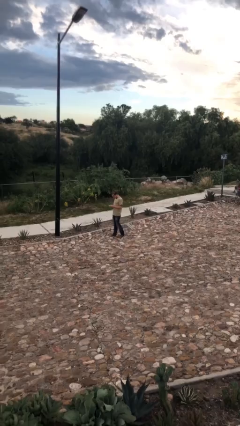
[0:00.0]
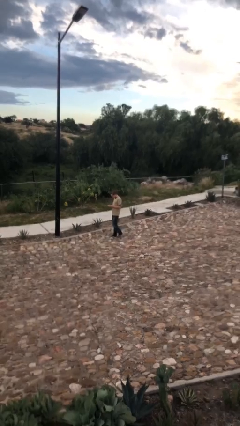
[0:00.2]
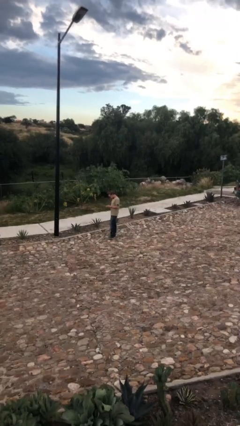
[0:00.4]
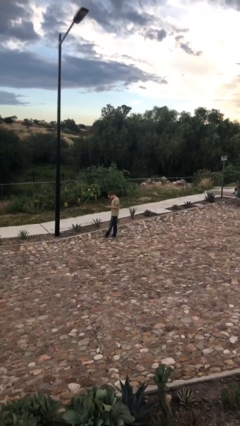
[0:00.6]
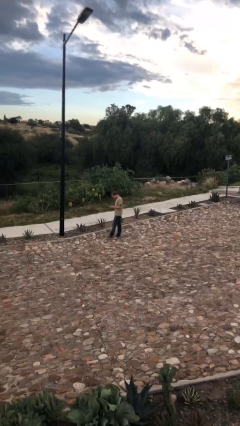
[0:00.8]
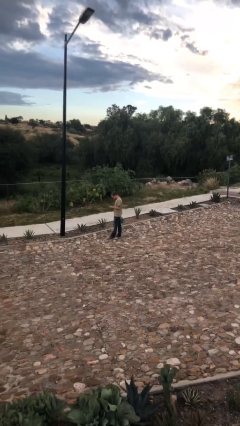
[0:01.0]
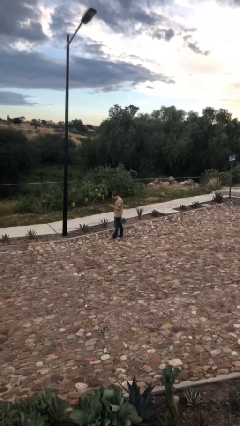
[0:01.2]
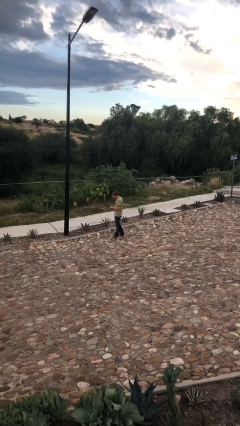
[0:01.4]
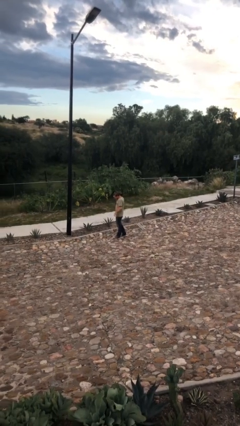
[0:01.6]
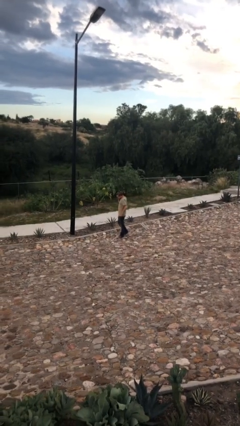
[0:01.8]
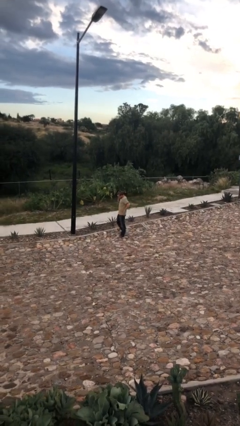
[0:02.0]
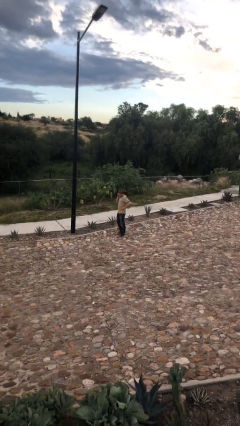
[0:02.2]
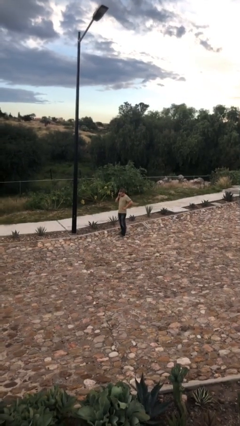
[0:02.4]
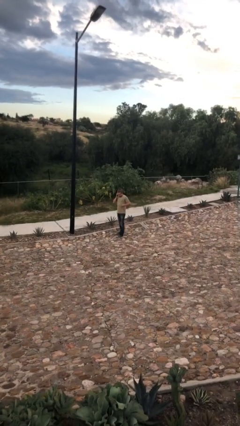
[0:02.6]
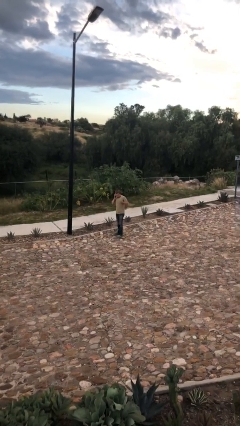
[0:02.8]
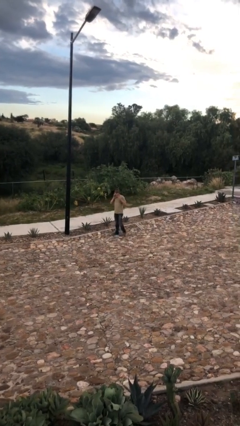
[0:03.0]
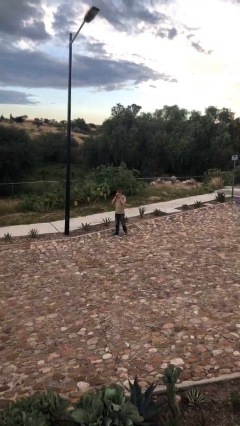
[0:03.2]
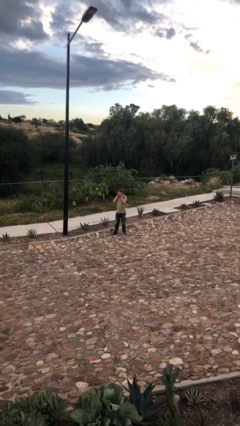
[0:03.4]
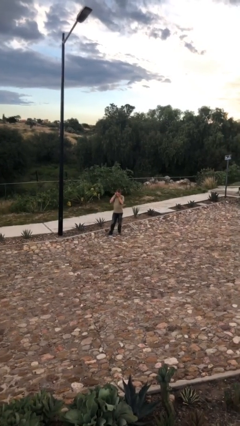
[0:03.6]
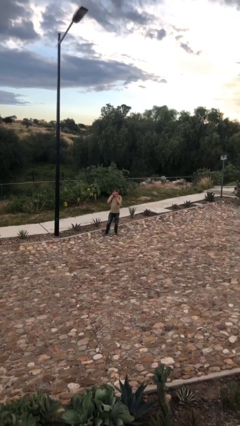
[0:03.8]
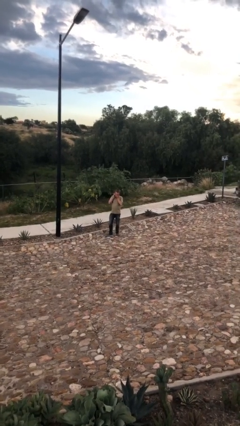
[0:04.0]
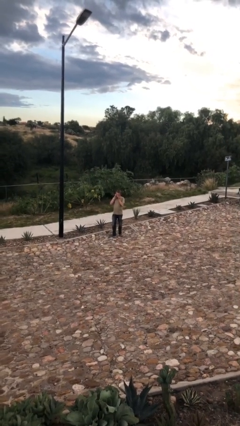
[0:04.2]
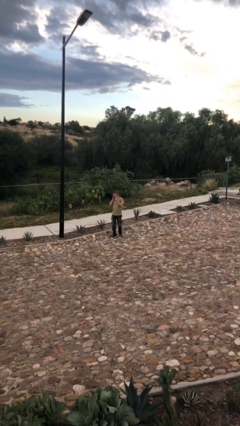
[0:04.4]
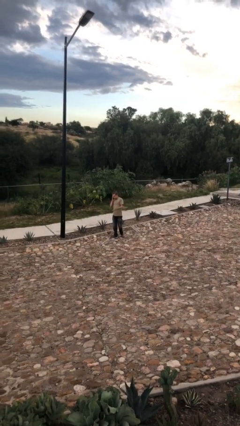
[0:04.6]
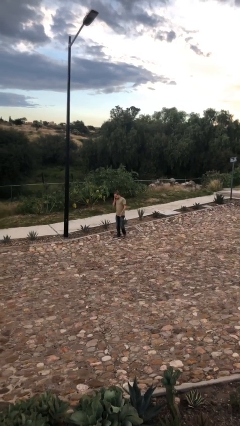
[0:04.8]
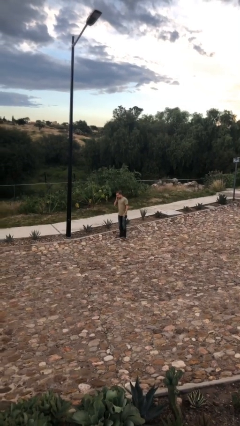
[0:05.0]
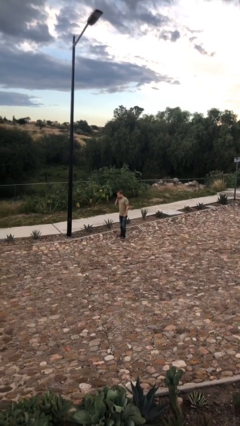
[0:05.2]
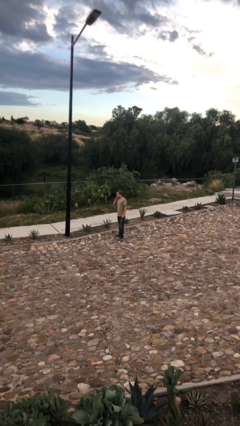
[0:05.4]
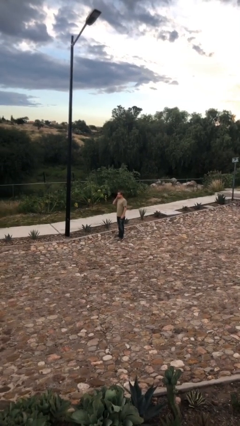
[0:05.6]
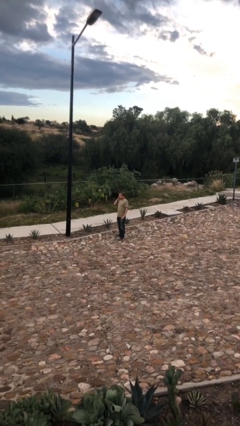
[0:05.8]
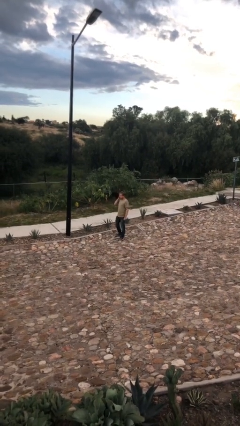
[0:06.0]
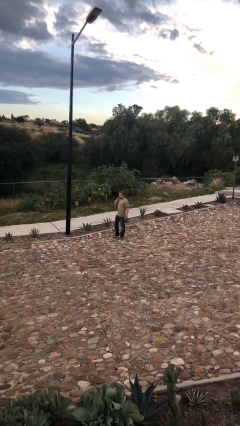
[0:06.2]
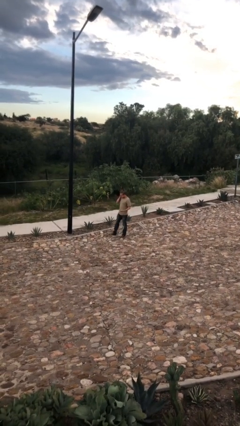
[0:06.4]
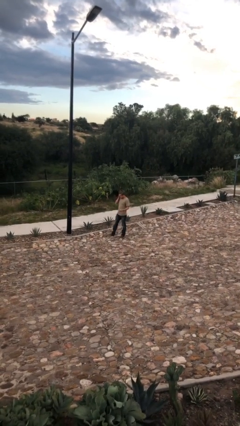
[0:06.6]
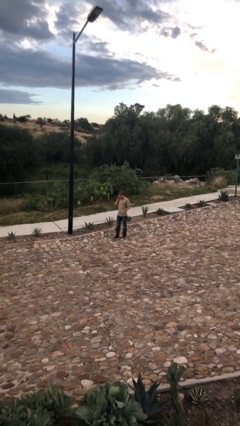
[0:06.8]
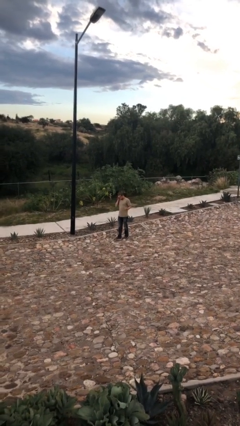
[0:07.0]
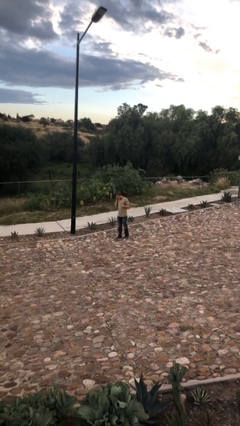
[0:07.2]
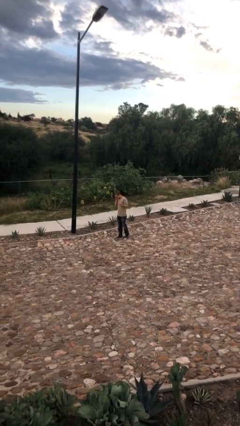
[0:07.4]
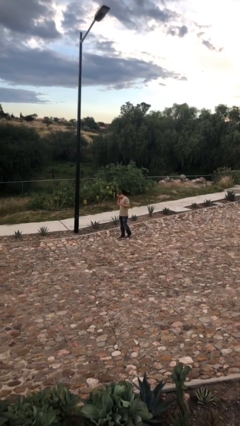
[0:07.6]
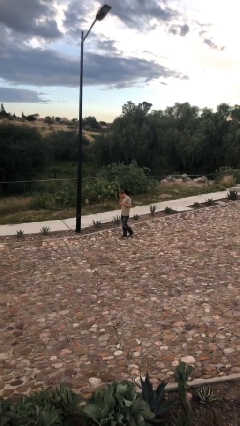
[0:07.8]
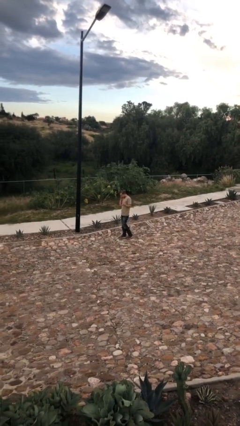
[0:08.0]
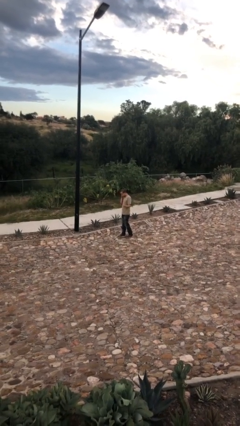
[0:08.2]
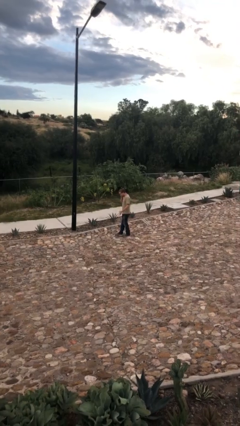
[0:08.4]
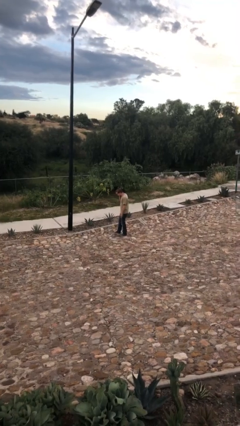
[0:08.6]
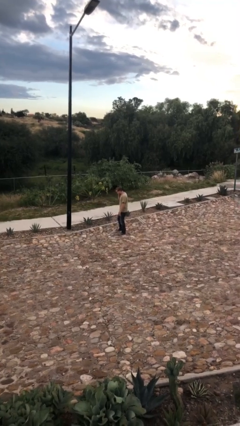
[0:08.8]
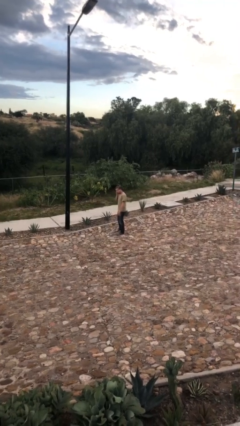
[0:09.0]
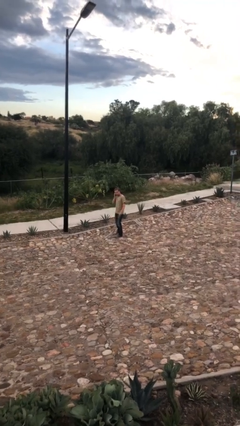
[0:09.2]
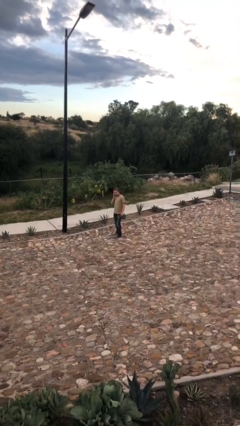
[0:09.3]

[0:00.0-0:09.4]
person talks on phone

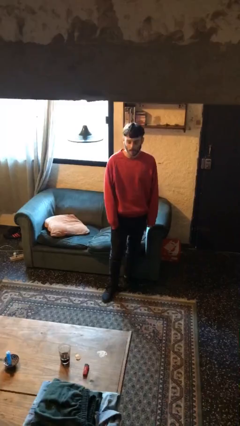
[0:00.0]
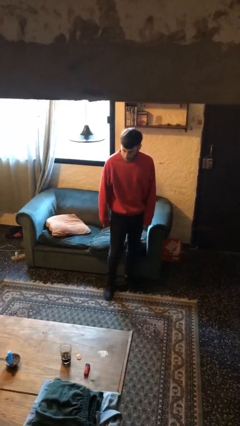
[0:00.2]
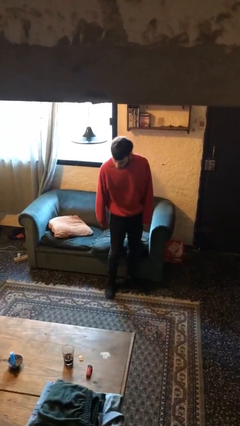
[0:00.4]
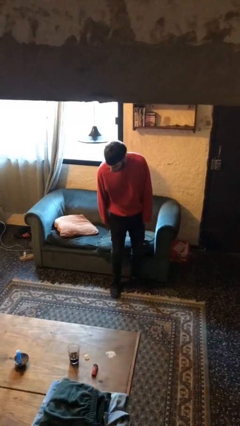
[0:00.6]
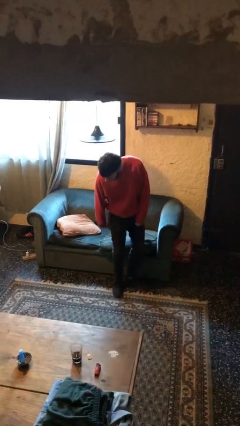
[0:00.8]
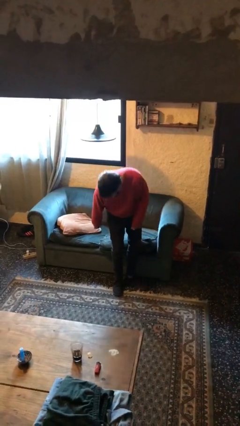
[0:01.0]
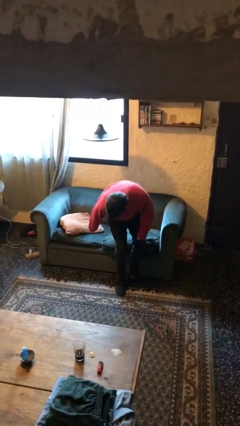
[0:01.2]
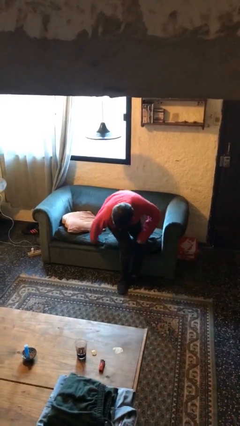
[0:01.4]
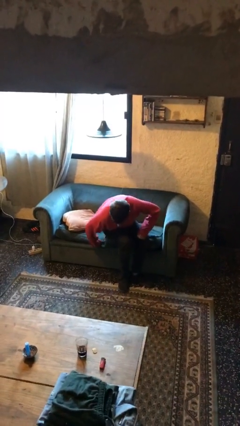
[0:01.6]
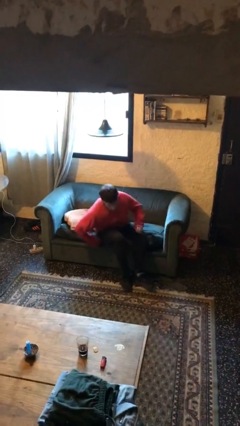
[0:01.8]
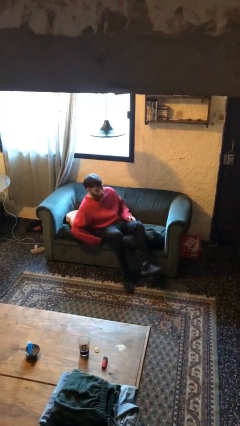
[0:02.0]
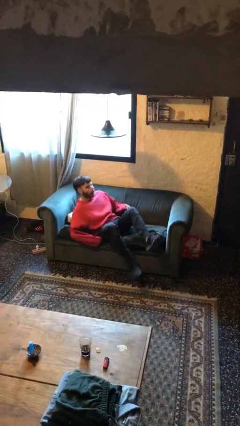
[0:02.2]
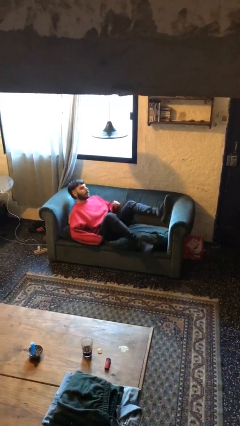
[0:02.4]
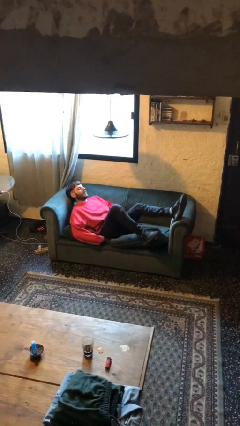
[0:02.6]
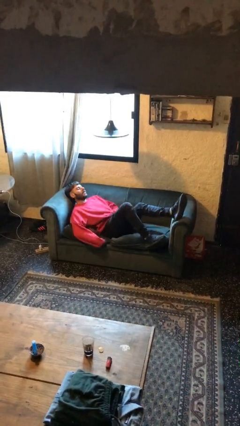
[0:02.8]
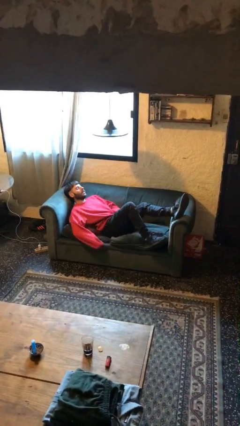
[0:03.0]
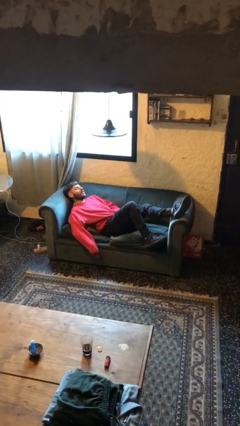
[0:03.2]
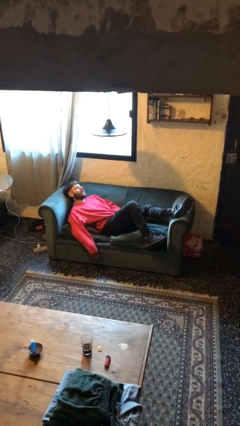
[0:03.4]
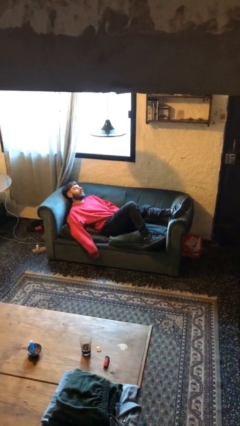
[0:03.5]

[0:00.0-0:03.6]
person lies down on couch

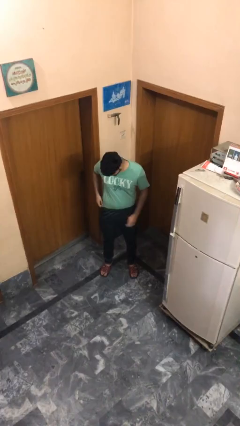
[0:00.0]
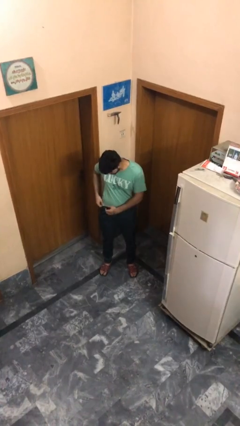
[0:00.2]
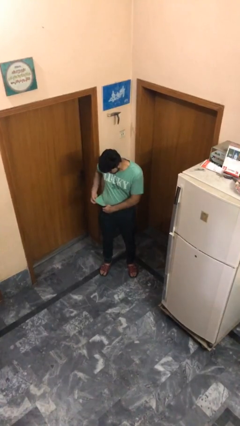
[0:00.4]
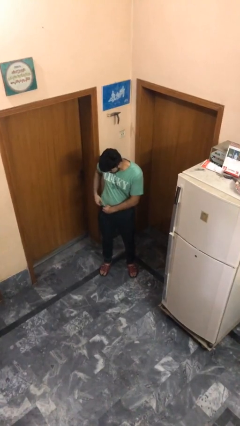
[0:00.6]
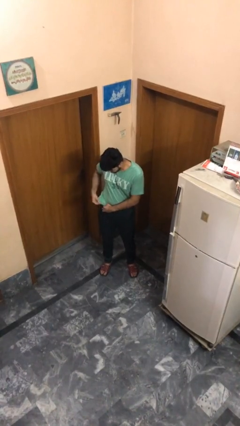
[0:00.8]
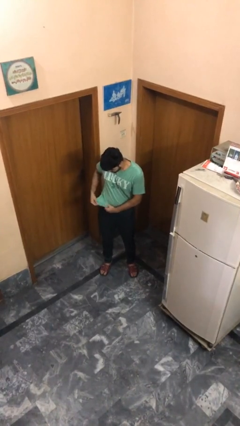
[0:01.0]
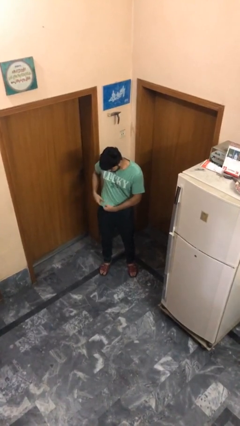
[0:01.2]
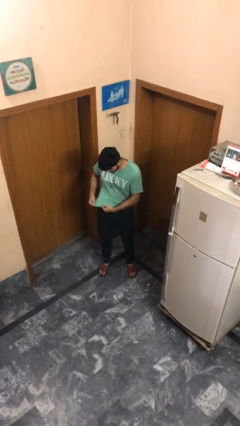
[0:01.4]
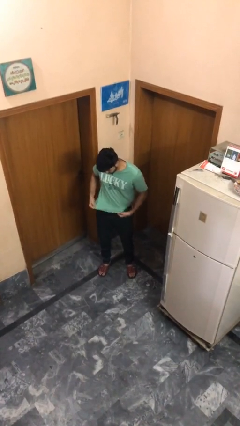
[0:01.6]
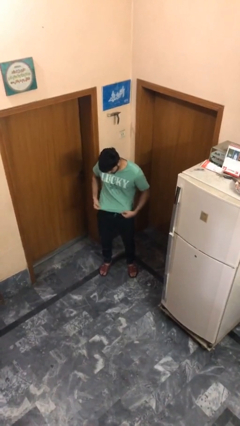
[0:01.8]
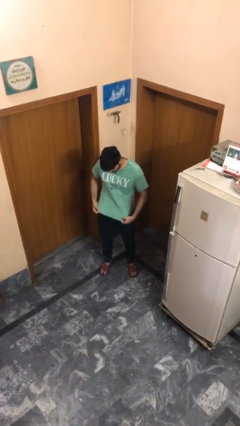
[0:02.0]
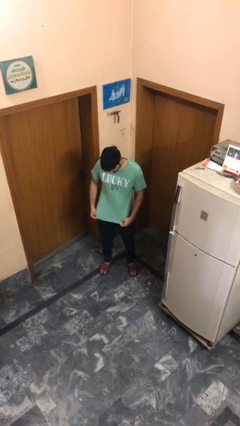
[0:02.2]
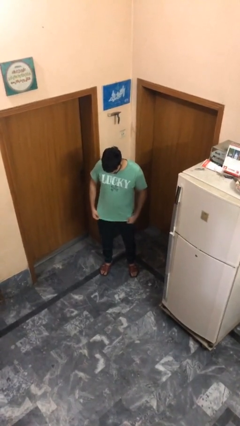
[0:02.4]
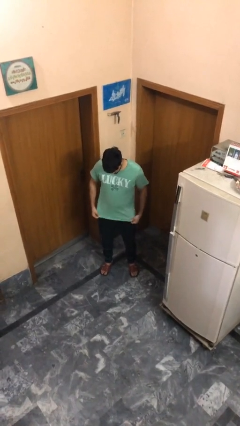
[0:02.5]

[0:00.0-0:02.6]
person untucks shirt

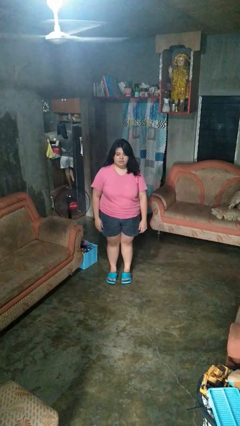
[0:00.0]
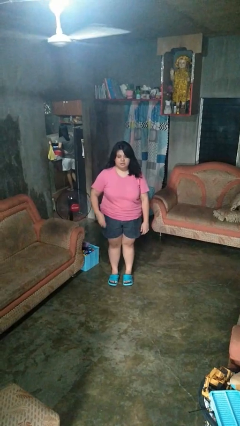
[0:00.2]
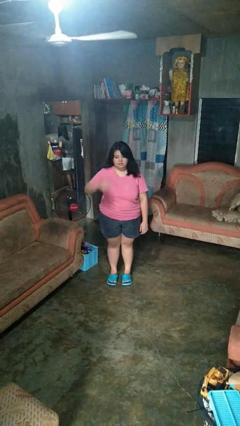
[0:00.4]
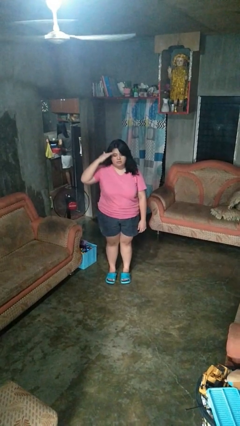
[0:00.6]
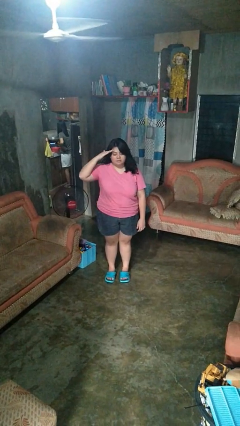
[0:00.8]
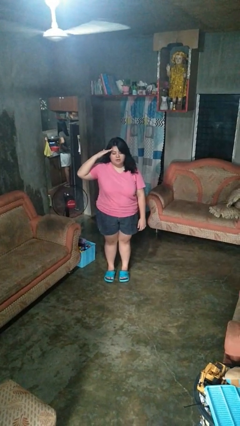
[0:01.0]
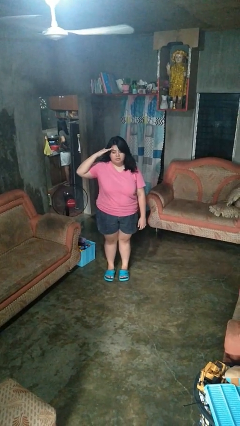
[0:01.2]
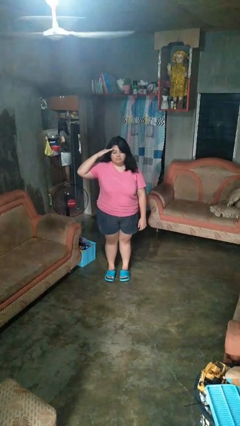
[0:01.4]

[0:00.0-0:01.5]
person salutes

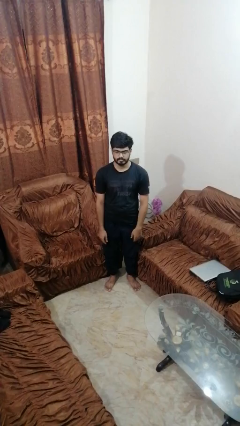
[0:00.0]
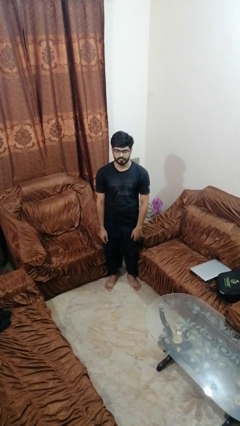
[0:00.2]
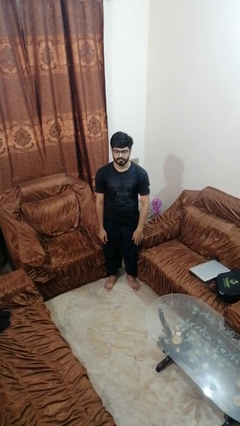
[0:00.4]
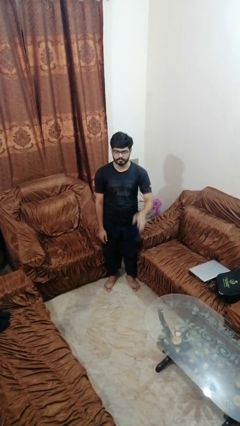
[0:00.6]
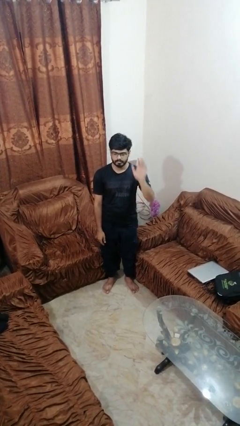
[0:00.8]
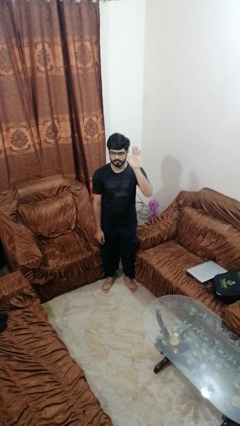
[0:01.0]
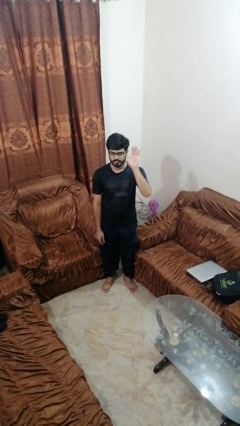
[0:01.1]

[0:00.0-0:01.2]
person gestures raise hand
